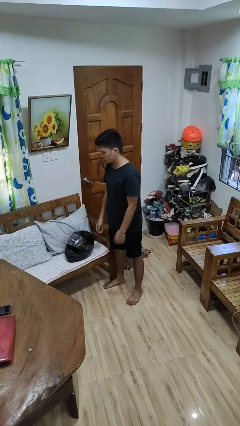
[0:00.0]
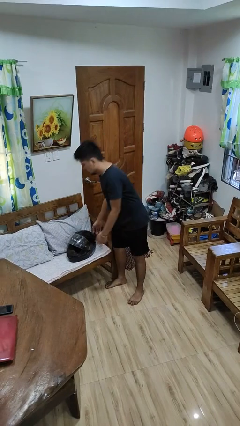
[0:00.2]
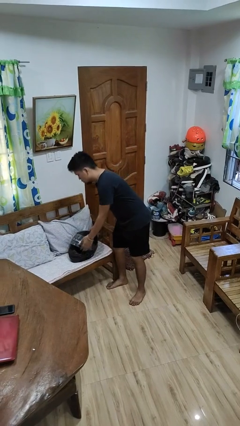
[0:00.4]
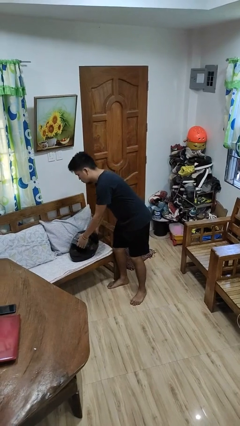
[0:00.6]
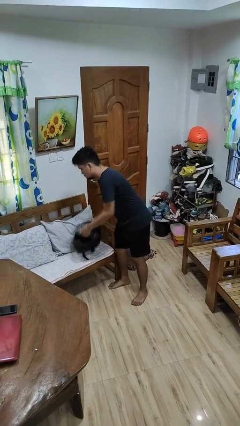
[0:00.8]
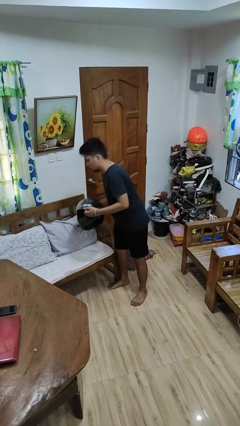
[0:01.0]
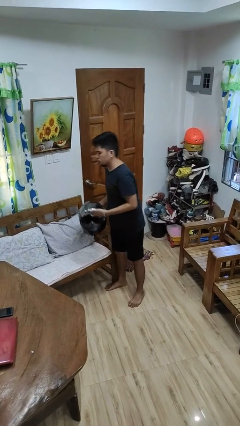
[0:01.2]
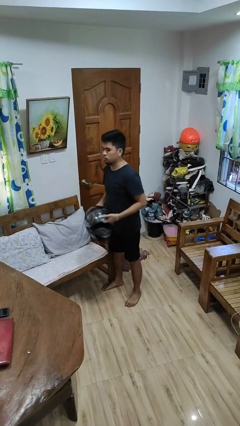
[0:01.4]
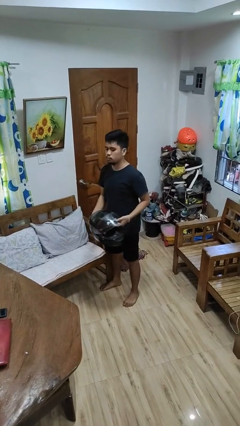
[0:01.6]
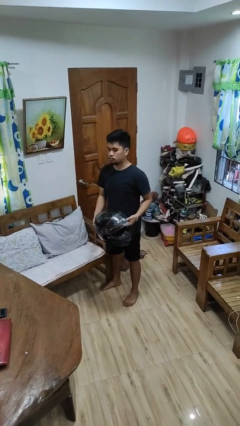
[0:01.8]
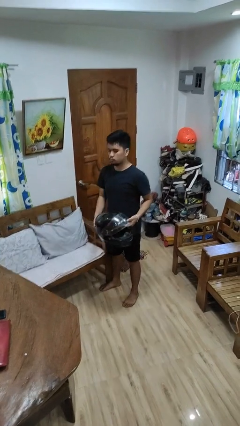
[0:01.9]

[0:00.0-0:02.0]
person picks up object from couch

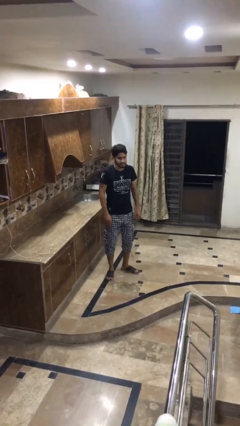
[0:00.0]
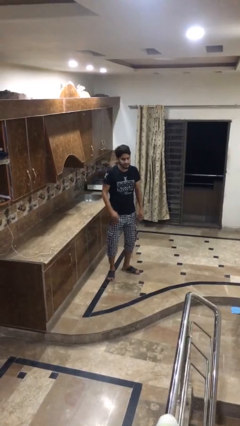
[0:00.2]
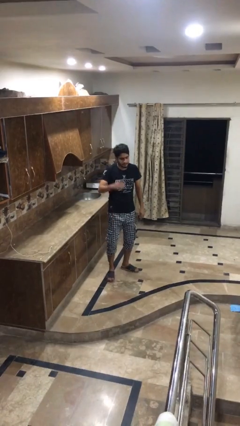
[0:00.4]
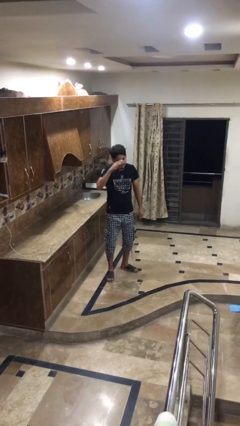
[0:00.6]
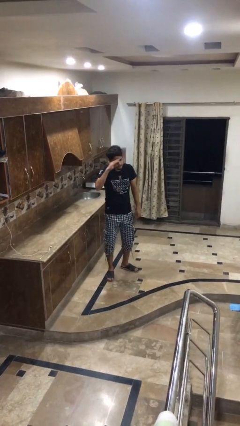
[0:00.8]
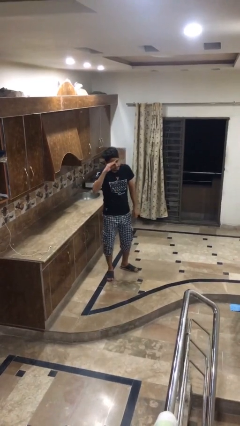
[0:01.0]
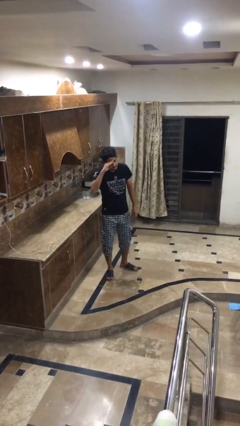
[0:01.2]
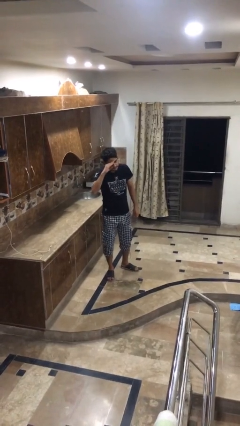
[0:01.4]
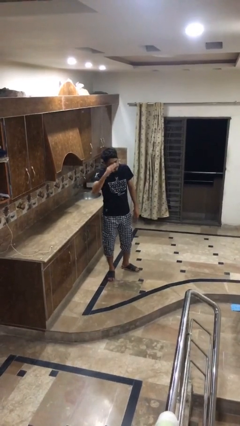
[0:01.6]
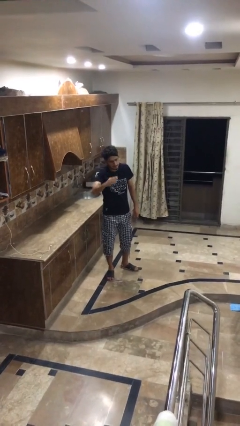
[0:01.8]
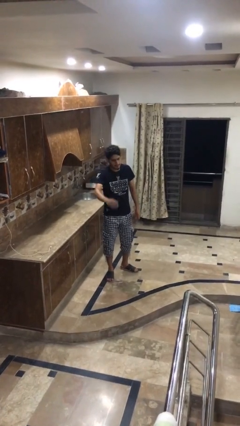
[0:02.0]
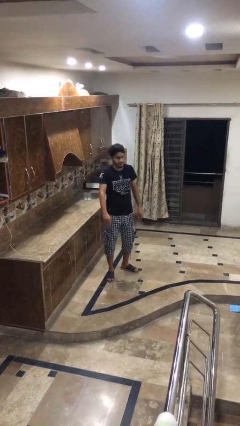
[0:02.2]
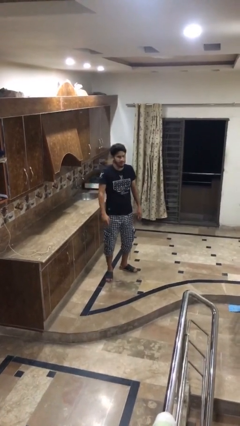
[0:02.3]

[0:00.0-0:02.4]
person salutes

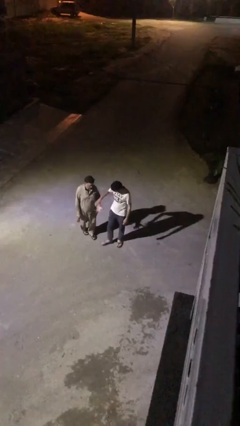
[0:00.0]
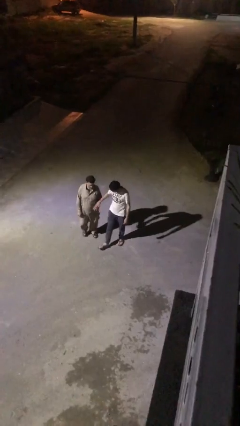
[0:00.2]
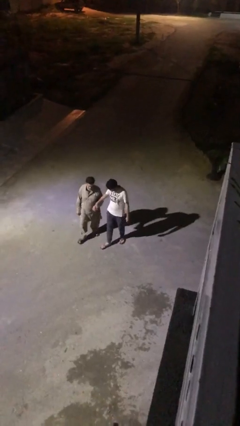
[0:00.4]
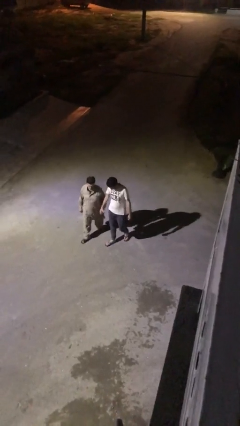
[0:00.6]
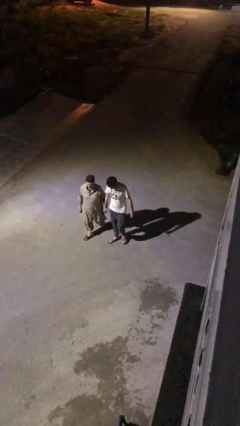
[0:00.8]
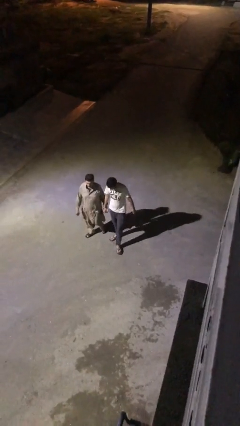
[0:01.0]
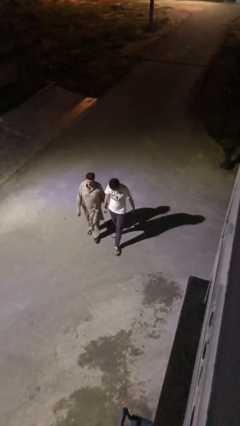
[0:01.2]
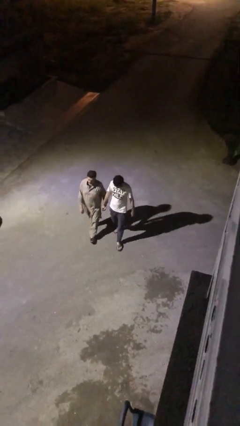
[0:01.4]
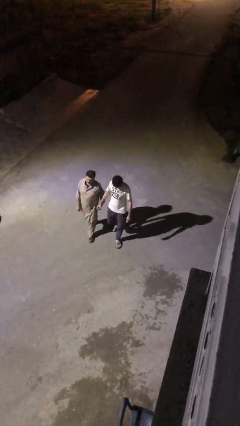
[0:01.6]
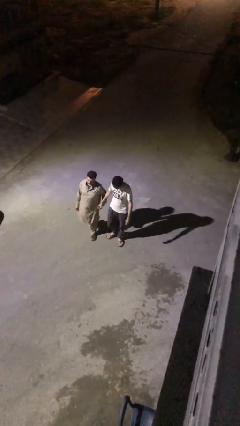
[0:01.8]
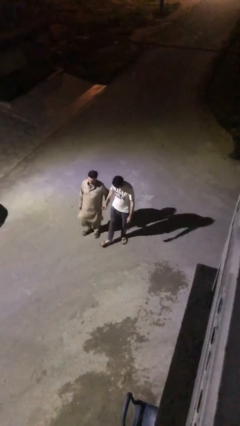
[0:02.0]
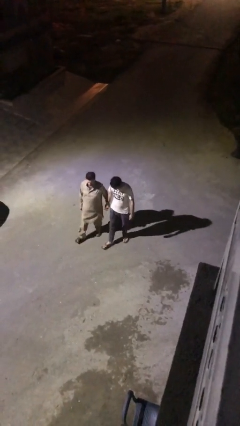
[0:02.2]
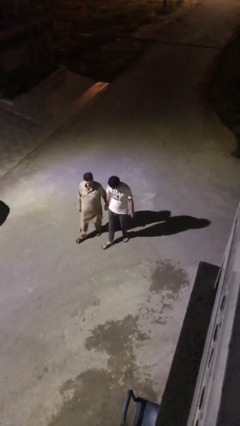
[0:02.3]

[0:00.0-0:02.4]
person holds hand

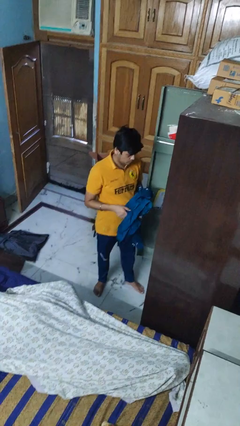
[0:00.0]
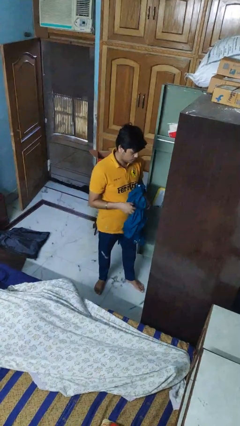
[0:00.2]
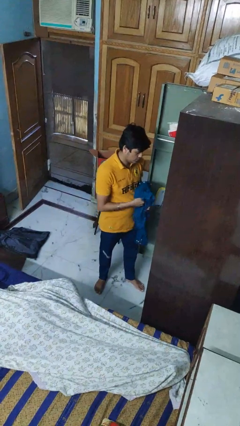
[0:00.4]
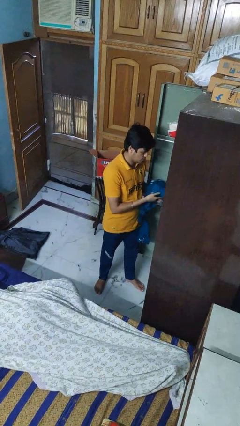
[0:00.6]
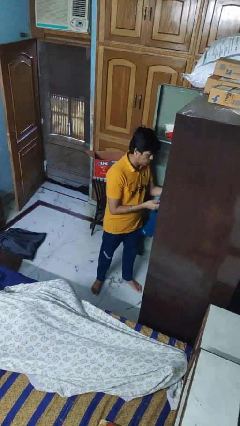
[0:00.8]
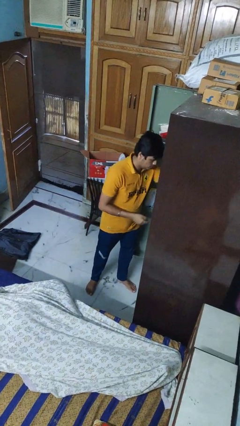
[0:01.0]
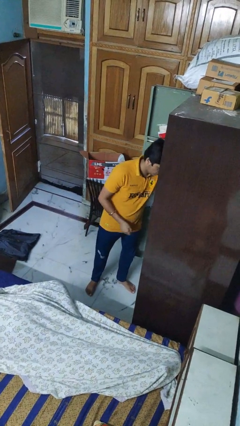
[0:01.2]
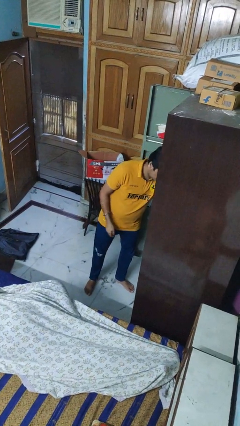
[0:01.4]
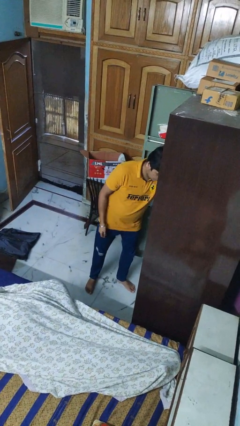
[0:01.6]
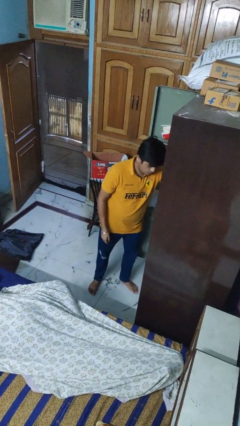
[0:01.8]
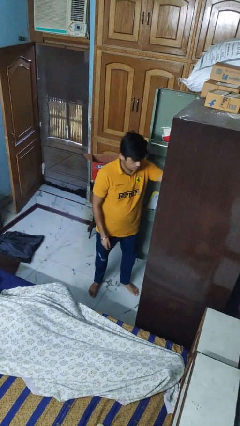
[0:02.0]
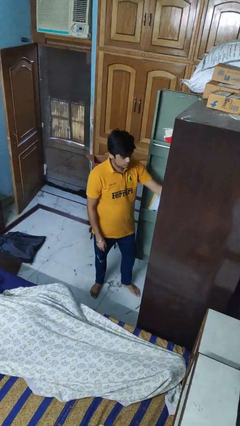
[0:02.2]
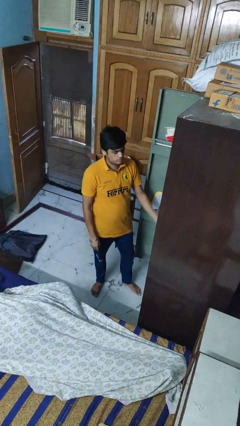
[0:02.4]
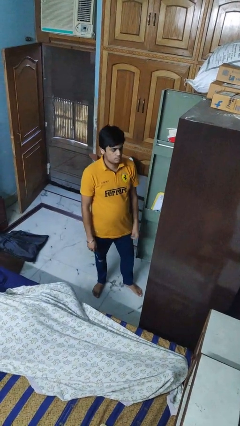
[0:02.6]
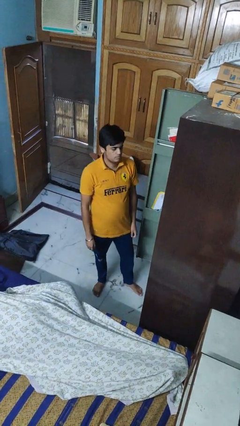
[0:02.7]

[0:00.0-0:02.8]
person puts clothes into dresser

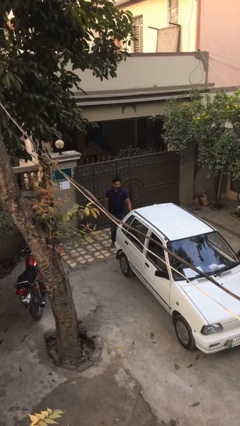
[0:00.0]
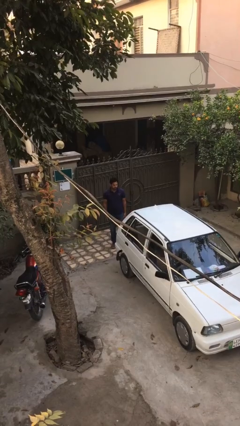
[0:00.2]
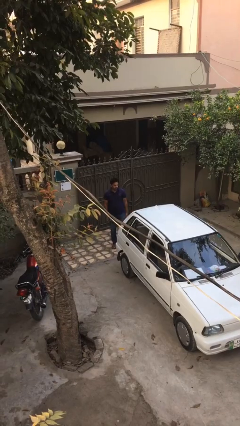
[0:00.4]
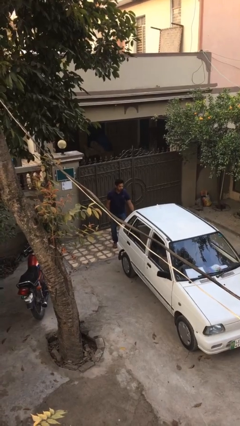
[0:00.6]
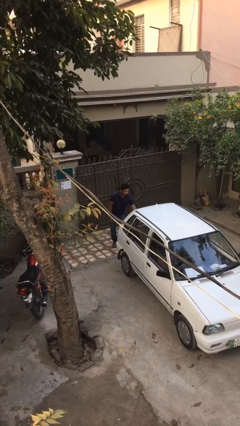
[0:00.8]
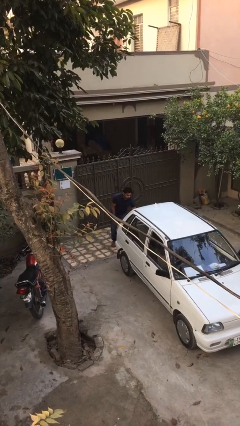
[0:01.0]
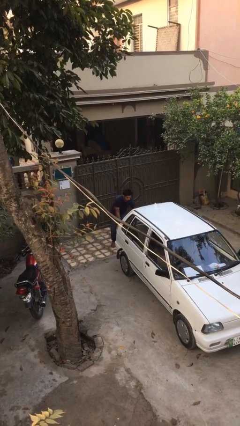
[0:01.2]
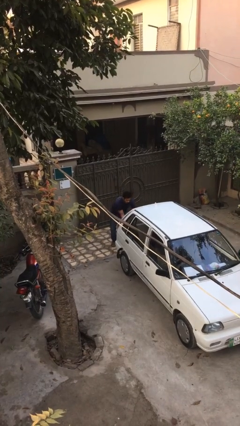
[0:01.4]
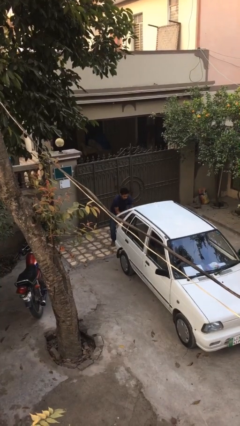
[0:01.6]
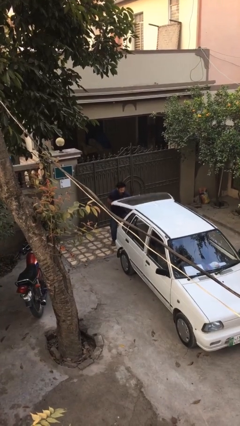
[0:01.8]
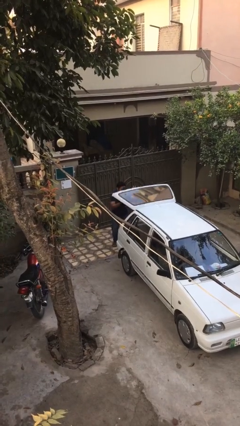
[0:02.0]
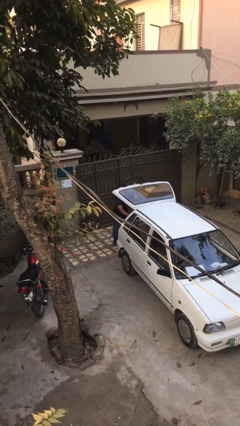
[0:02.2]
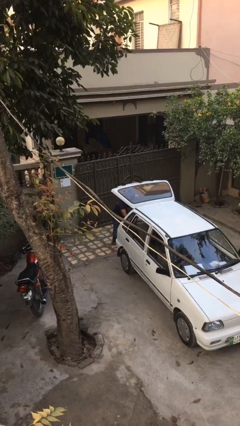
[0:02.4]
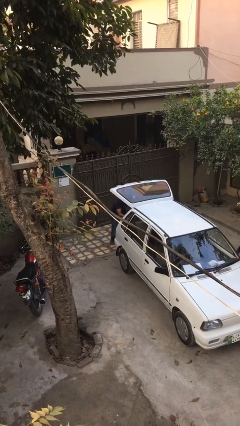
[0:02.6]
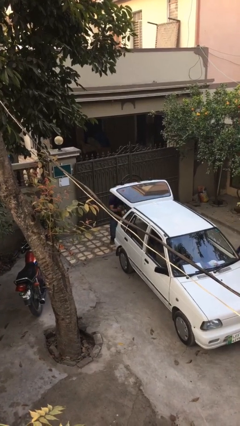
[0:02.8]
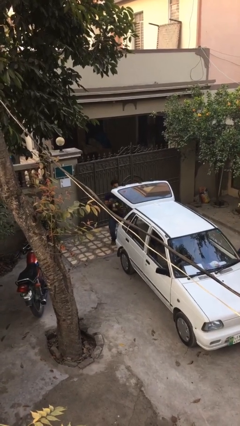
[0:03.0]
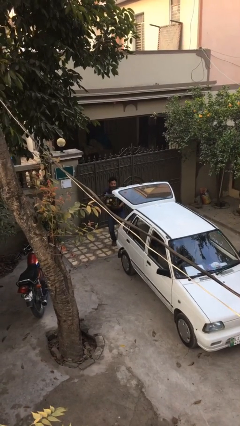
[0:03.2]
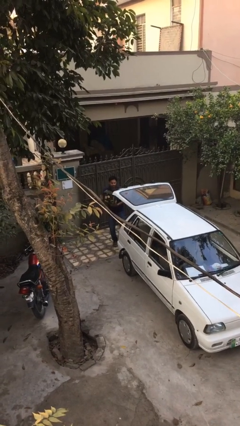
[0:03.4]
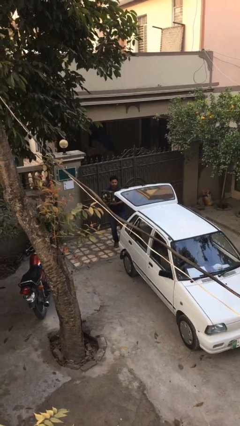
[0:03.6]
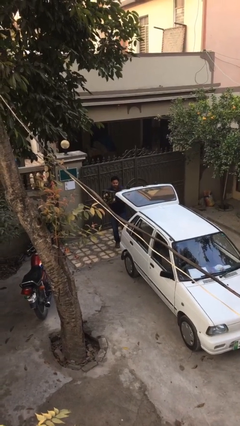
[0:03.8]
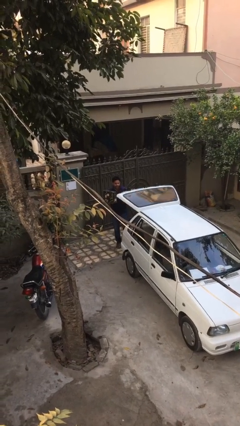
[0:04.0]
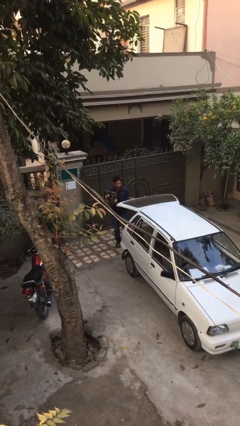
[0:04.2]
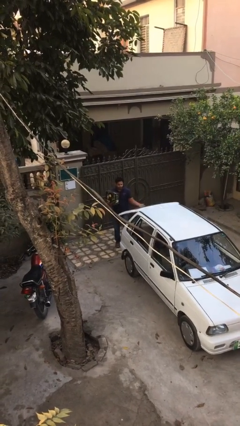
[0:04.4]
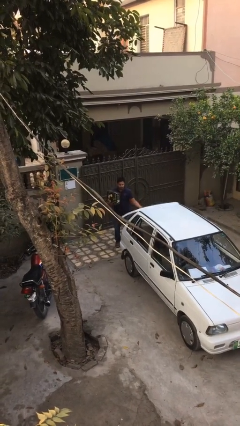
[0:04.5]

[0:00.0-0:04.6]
person unloads car

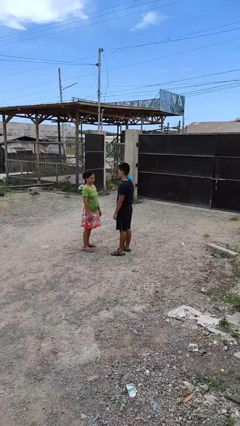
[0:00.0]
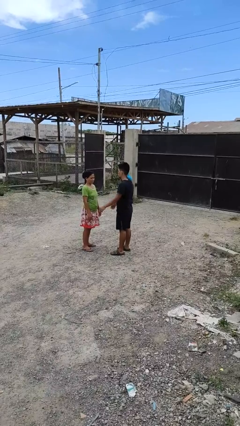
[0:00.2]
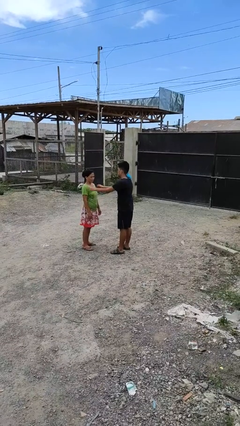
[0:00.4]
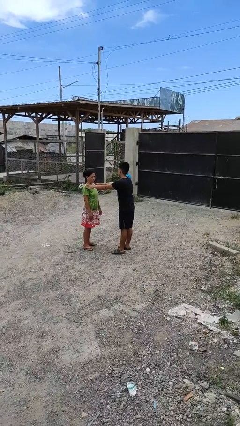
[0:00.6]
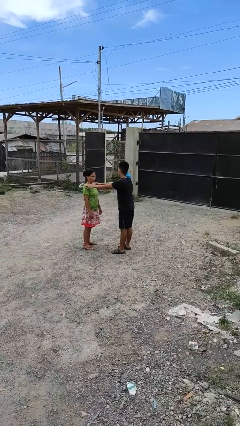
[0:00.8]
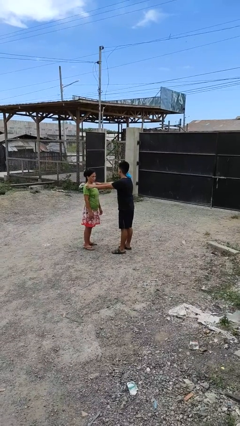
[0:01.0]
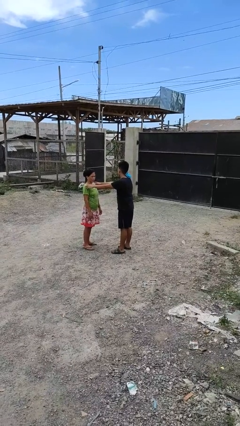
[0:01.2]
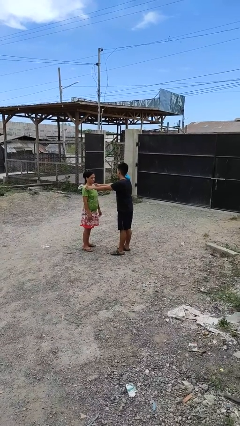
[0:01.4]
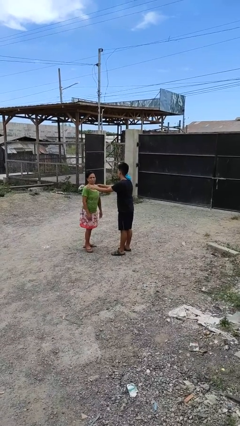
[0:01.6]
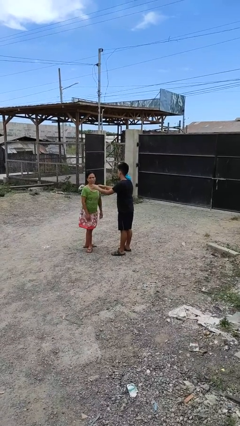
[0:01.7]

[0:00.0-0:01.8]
person grabs person by shoulder

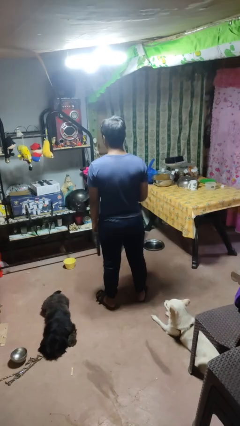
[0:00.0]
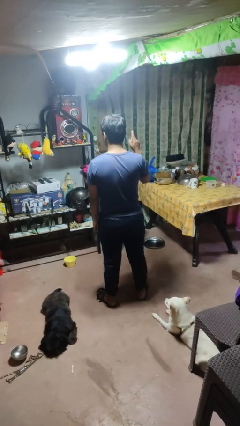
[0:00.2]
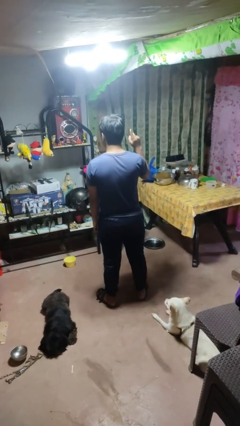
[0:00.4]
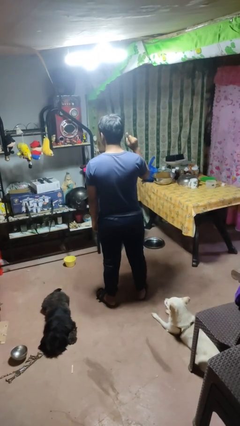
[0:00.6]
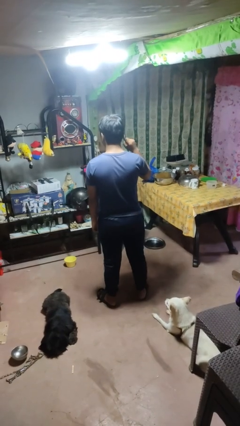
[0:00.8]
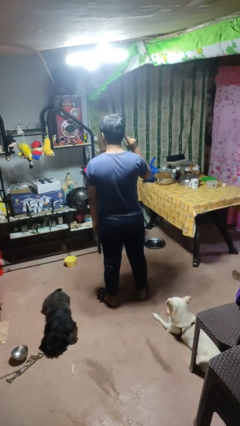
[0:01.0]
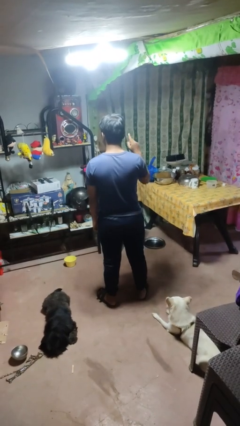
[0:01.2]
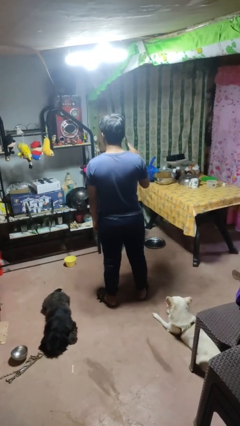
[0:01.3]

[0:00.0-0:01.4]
person gestures listen closely
